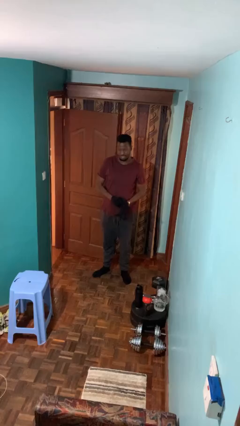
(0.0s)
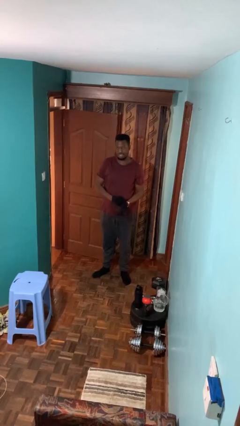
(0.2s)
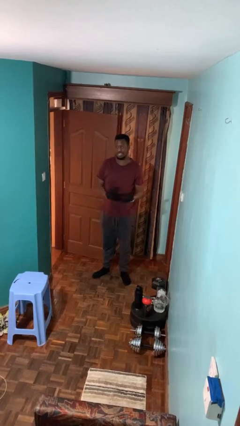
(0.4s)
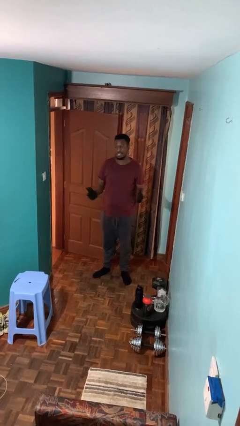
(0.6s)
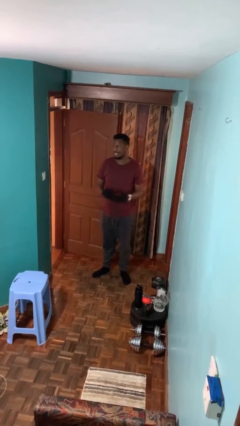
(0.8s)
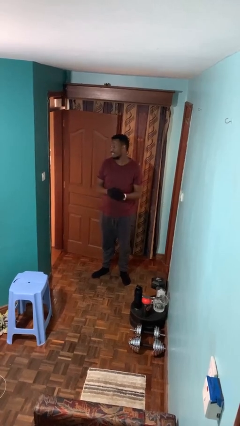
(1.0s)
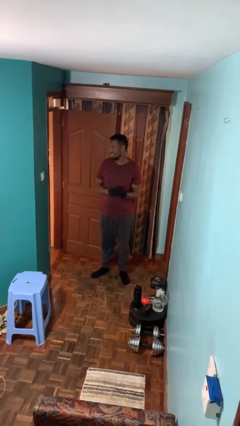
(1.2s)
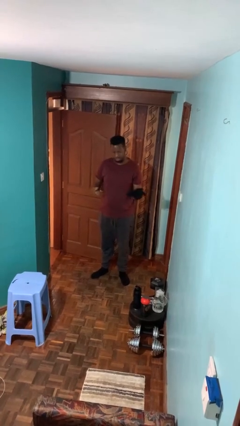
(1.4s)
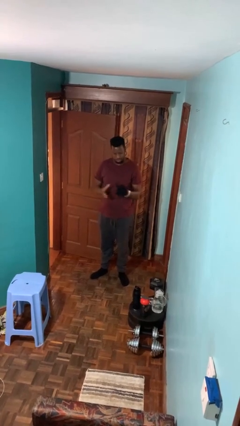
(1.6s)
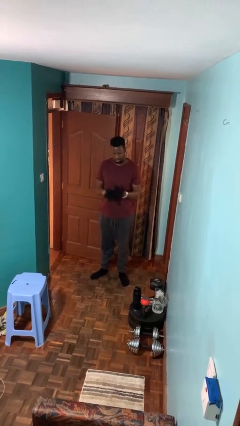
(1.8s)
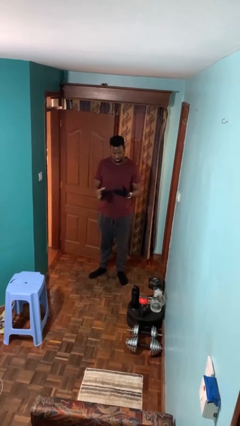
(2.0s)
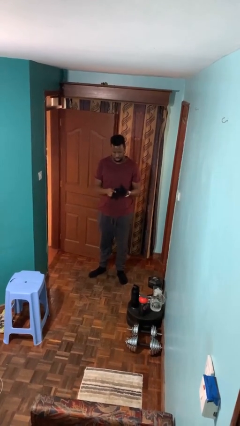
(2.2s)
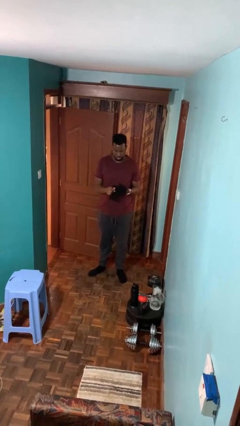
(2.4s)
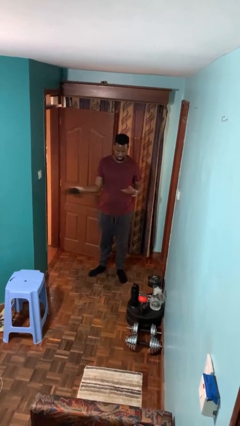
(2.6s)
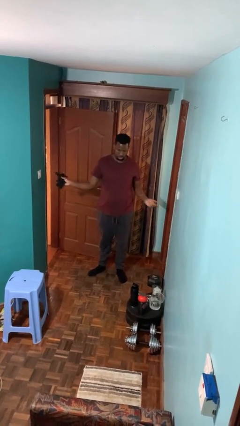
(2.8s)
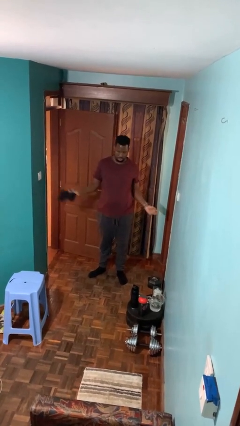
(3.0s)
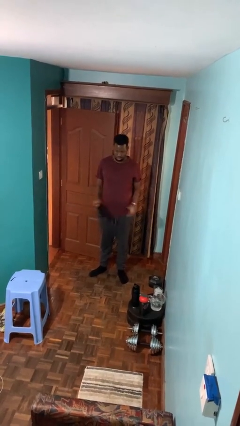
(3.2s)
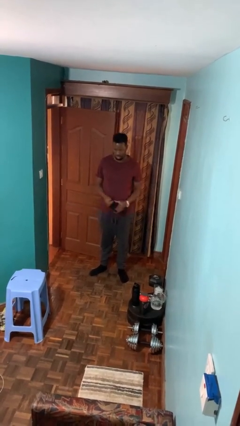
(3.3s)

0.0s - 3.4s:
person takes off gloves

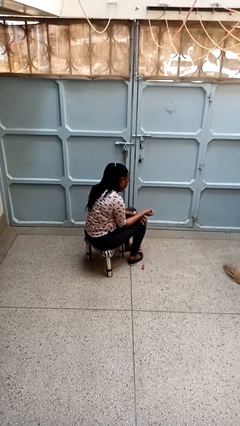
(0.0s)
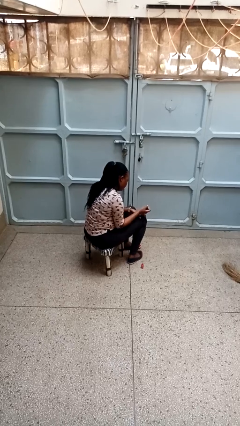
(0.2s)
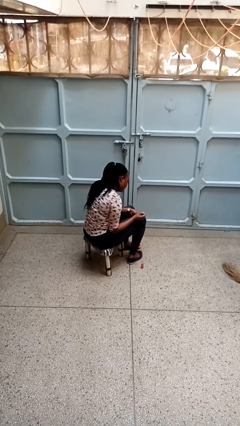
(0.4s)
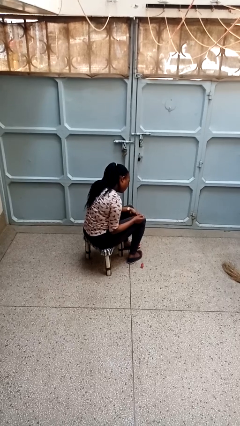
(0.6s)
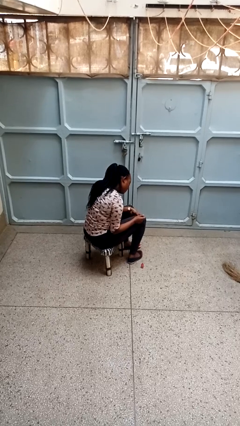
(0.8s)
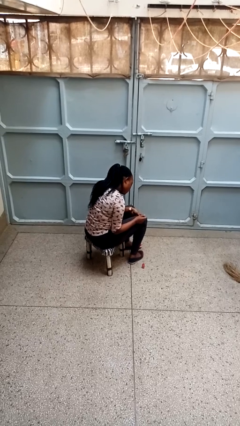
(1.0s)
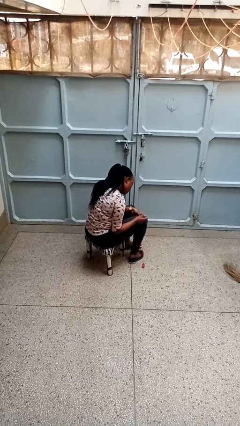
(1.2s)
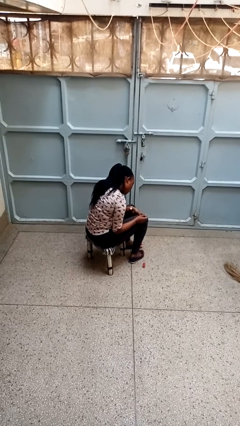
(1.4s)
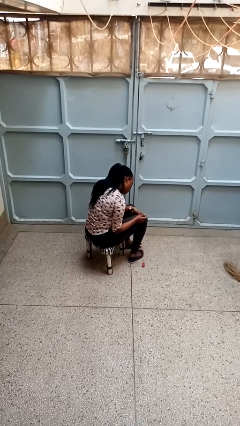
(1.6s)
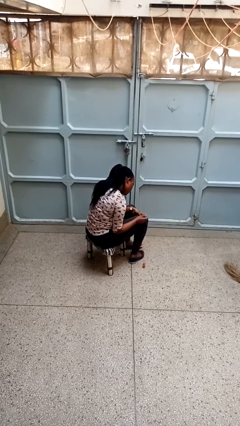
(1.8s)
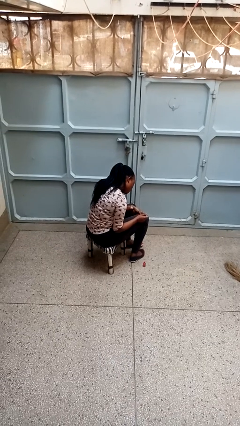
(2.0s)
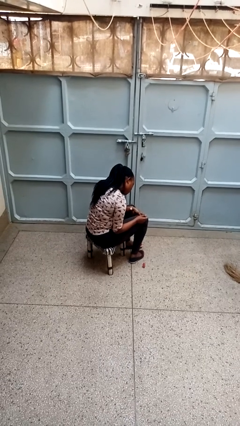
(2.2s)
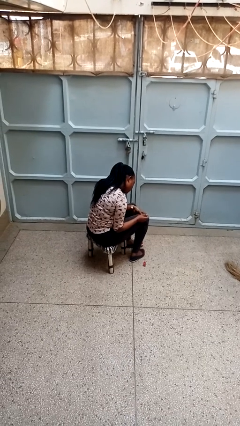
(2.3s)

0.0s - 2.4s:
person paints fingernails

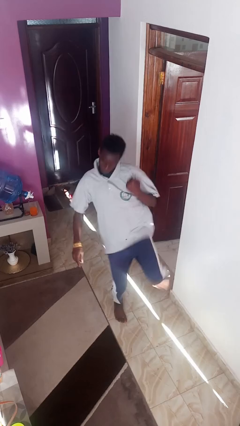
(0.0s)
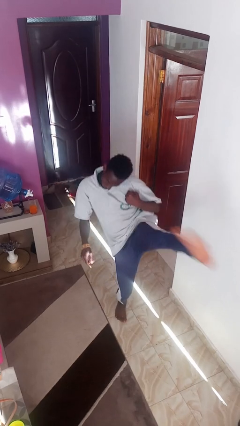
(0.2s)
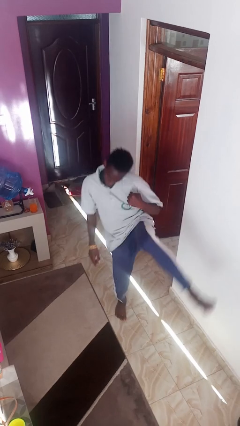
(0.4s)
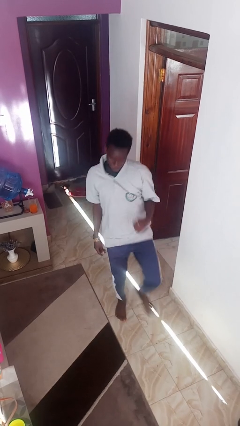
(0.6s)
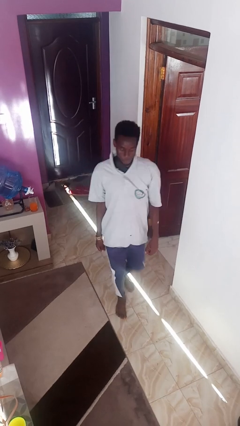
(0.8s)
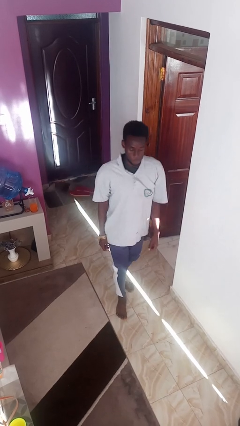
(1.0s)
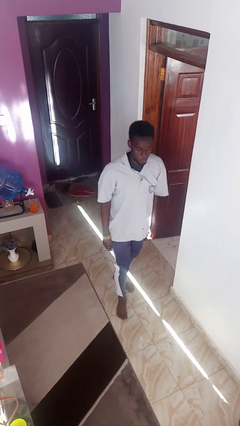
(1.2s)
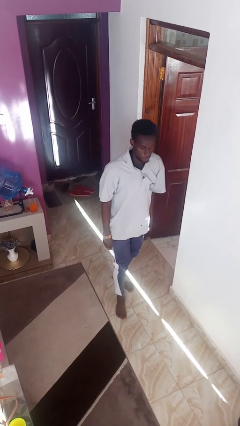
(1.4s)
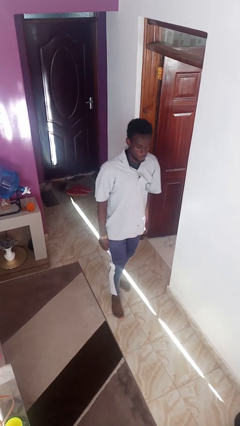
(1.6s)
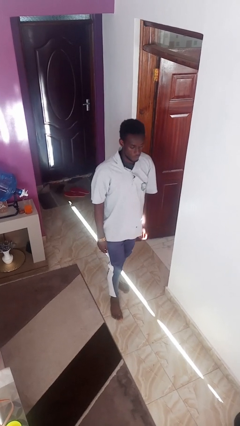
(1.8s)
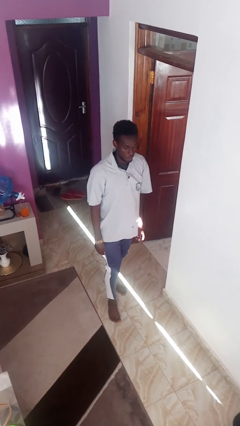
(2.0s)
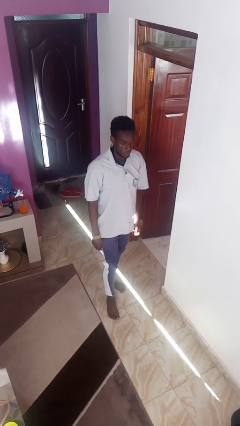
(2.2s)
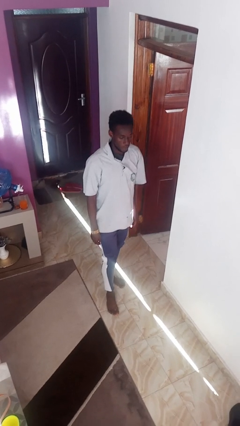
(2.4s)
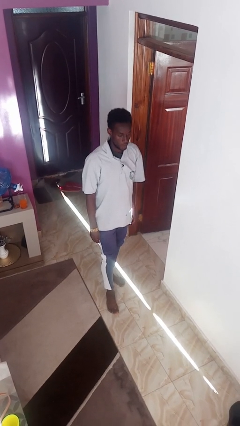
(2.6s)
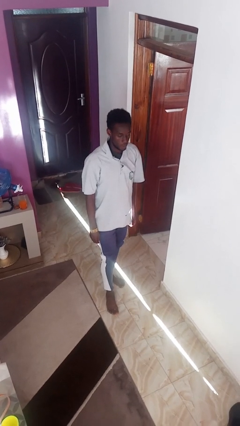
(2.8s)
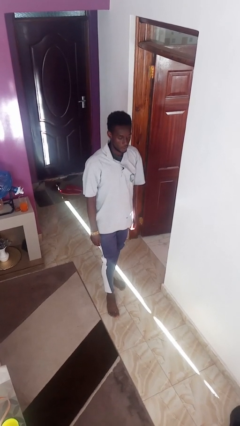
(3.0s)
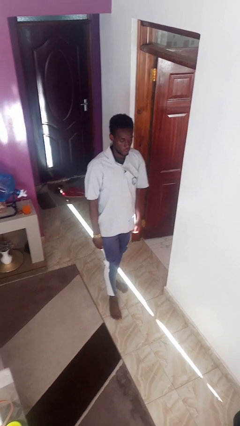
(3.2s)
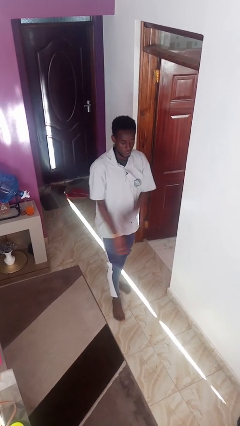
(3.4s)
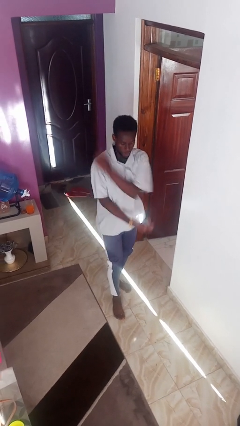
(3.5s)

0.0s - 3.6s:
person karate kicks

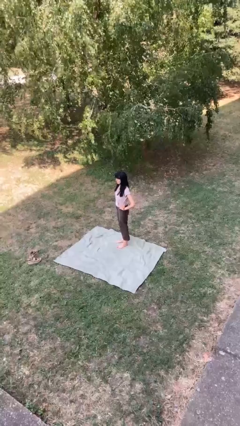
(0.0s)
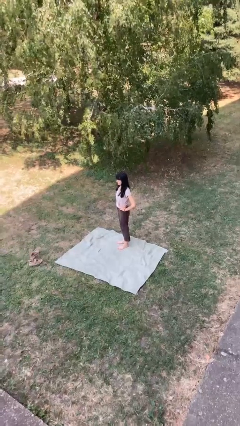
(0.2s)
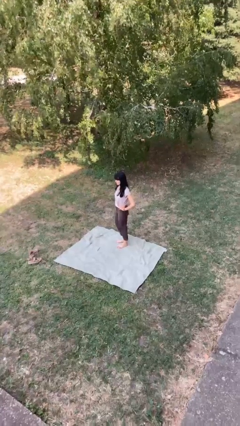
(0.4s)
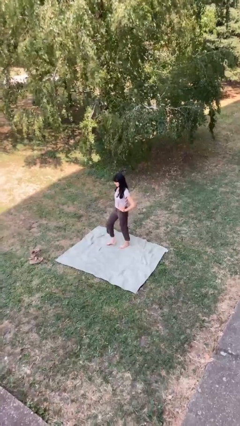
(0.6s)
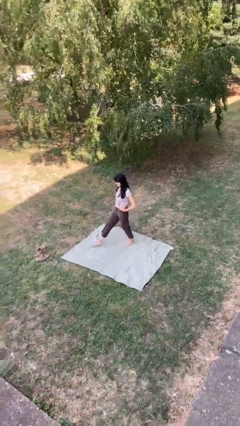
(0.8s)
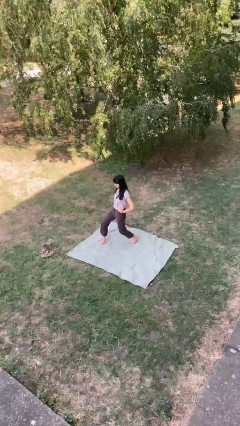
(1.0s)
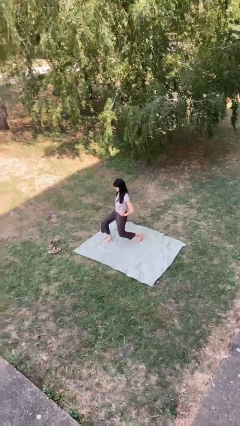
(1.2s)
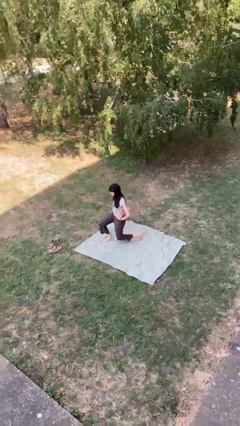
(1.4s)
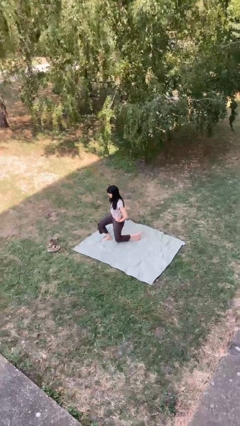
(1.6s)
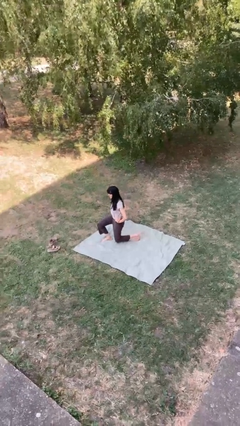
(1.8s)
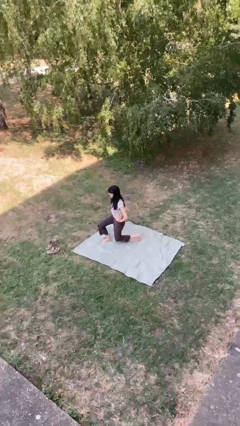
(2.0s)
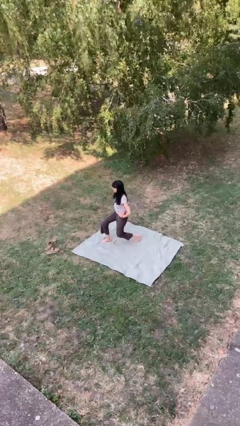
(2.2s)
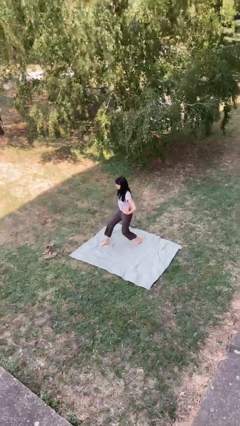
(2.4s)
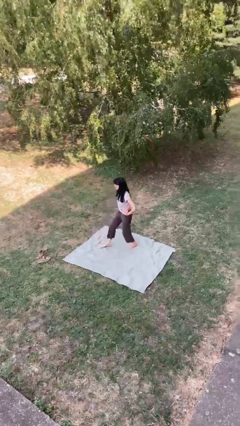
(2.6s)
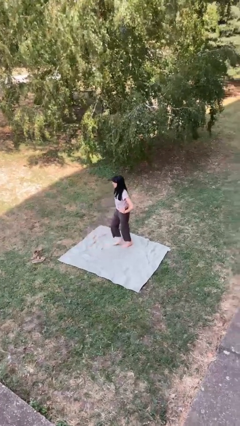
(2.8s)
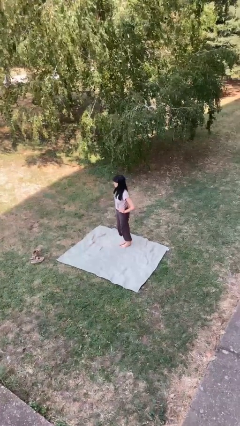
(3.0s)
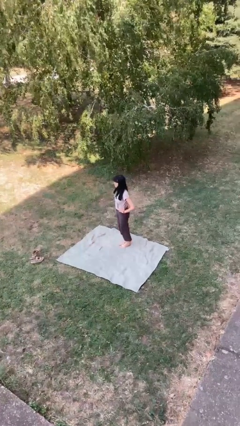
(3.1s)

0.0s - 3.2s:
person exercises with lunges

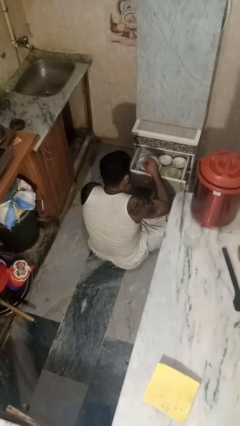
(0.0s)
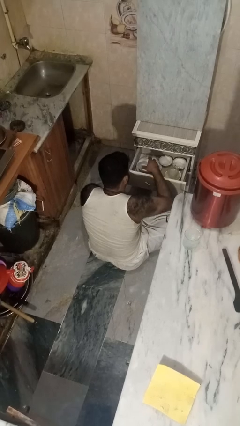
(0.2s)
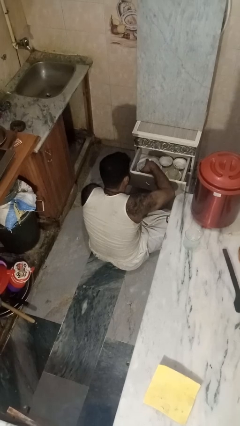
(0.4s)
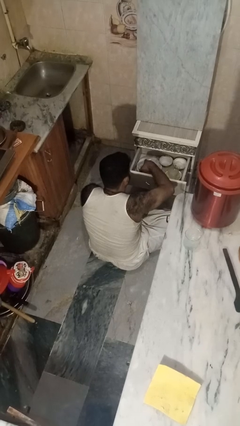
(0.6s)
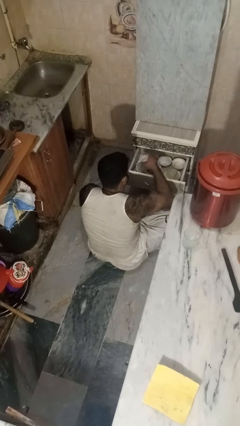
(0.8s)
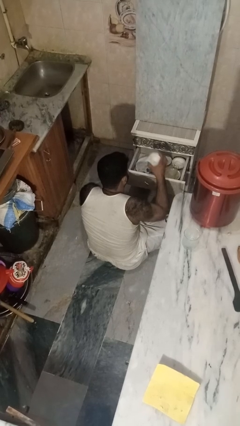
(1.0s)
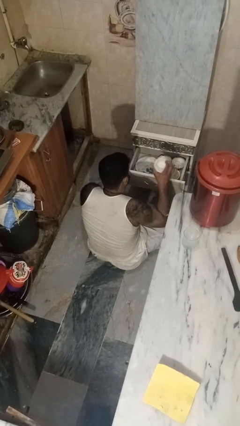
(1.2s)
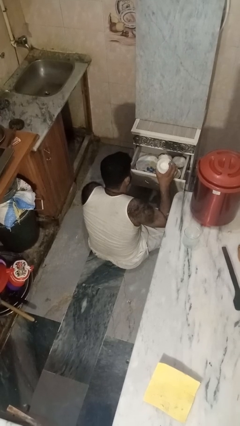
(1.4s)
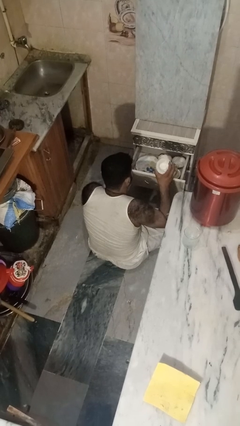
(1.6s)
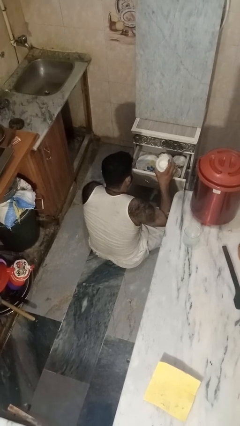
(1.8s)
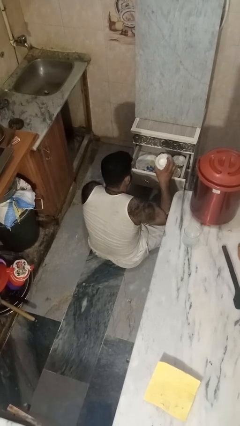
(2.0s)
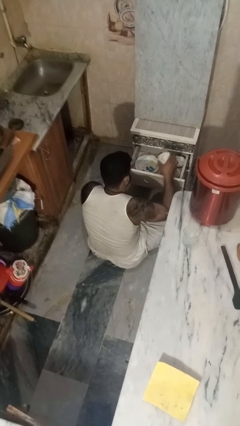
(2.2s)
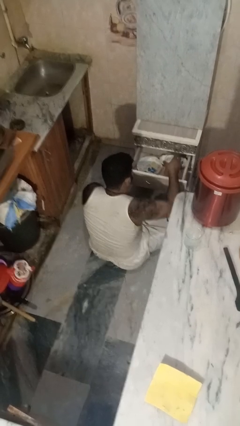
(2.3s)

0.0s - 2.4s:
person takes object from kitchen drawer

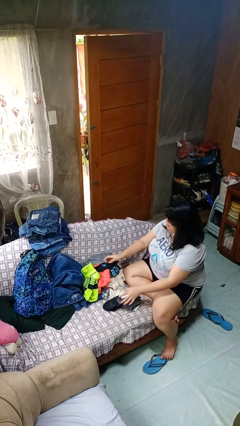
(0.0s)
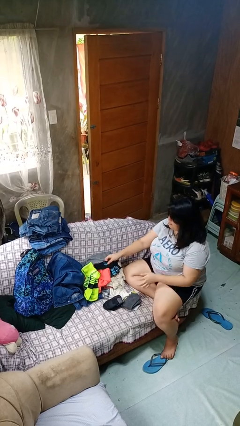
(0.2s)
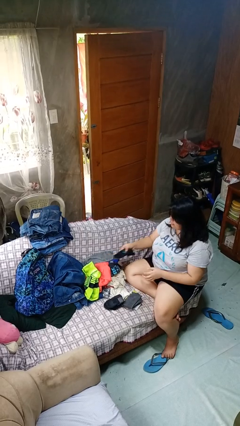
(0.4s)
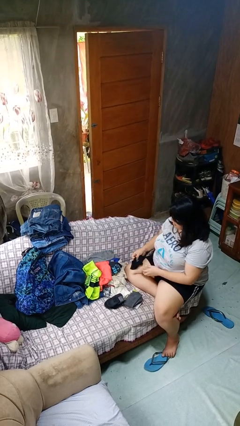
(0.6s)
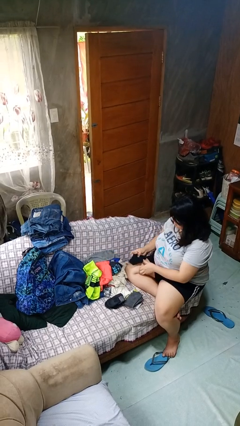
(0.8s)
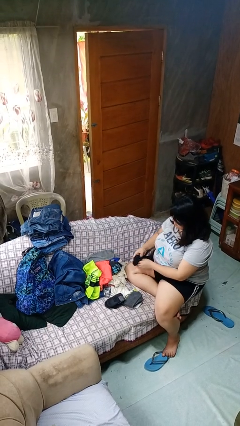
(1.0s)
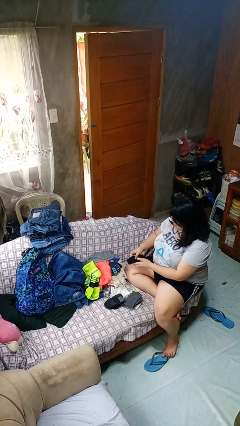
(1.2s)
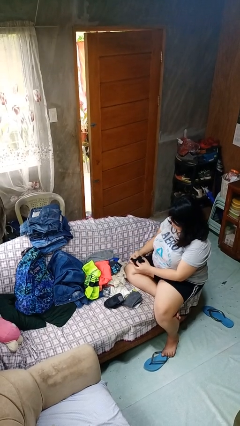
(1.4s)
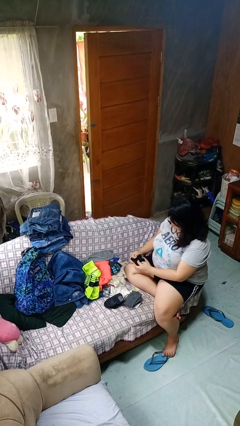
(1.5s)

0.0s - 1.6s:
person folds socks

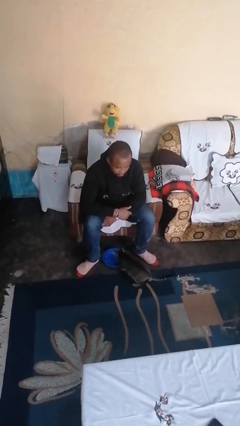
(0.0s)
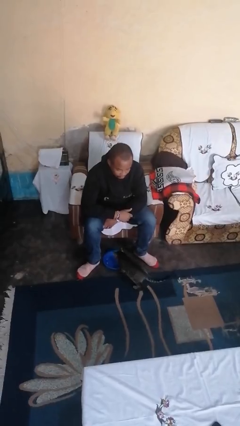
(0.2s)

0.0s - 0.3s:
person hugs cat

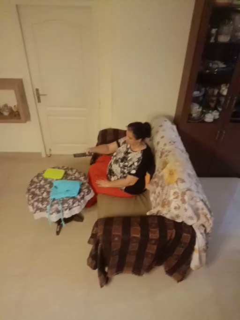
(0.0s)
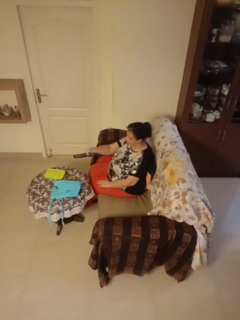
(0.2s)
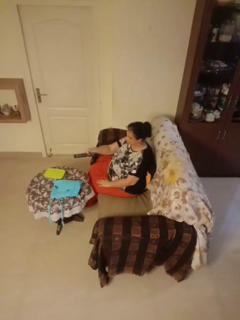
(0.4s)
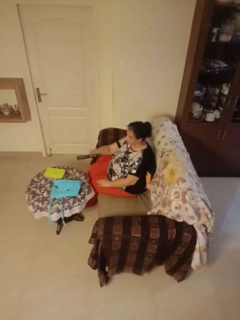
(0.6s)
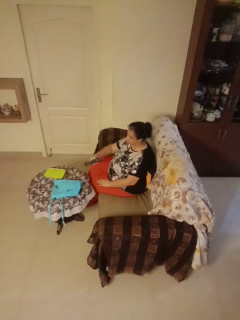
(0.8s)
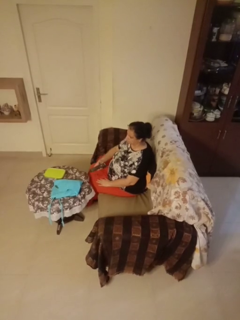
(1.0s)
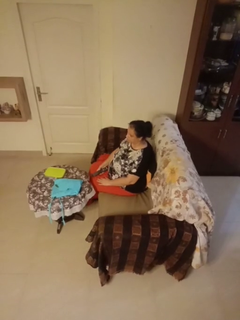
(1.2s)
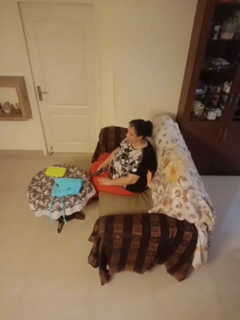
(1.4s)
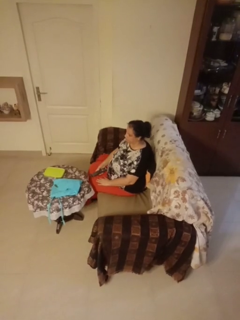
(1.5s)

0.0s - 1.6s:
person uses television remote
